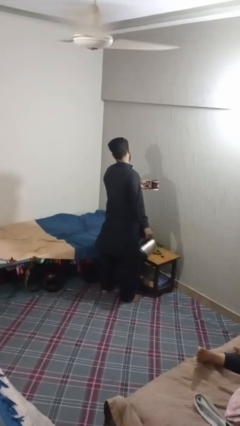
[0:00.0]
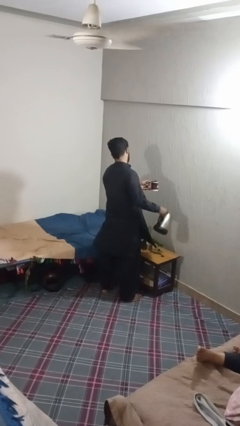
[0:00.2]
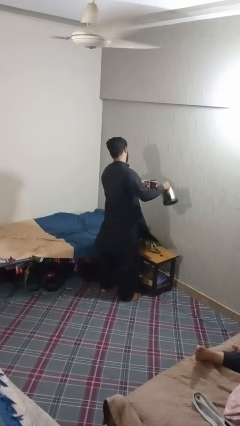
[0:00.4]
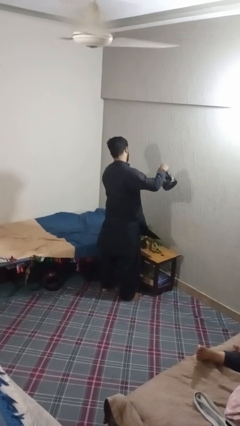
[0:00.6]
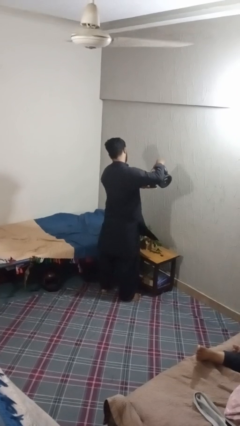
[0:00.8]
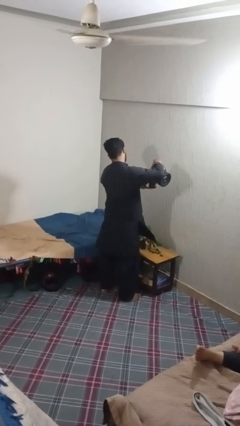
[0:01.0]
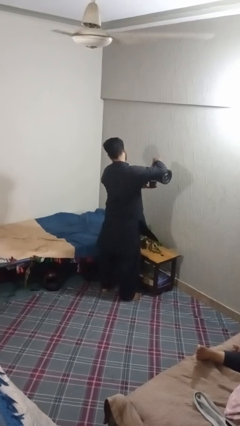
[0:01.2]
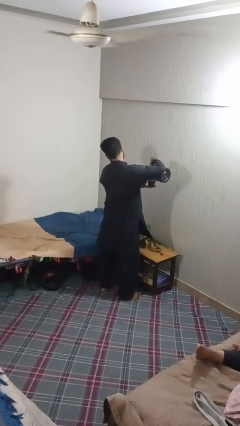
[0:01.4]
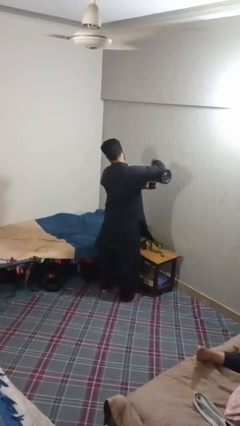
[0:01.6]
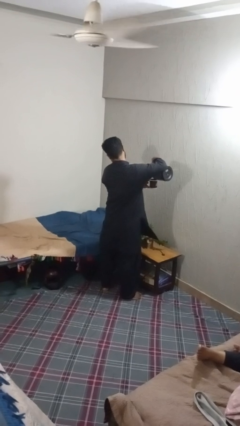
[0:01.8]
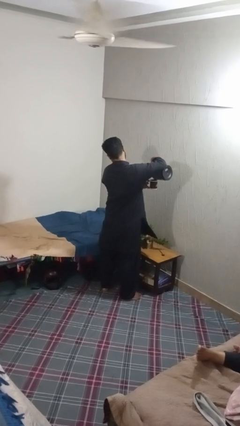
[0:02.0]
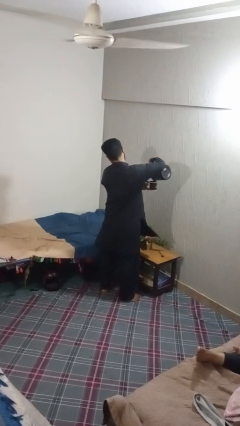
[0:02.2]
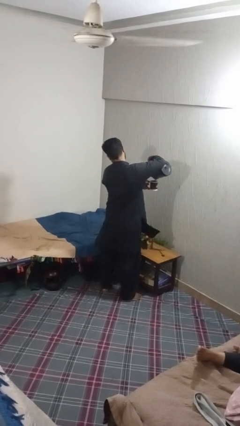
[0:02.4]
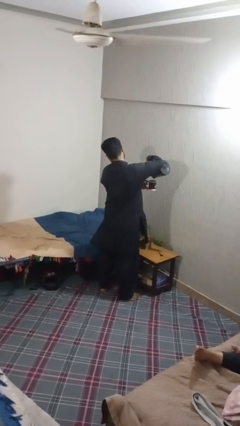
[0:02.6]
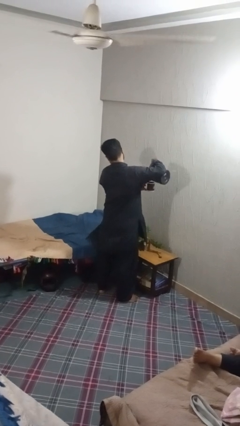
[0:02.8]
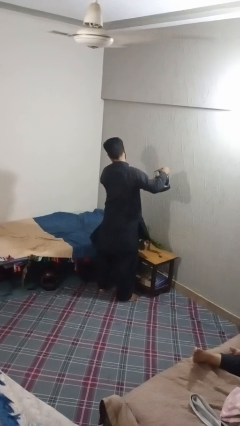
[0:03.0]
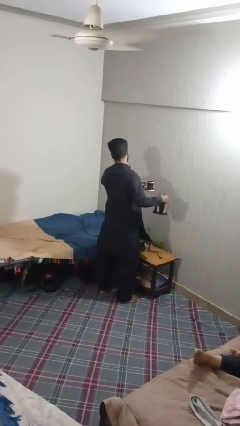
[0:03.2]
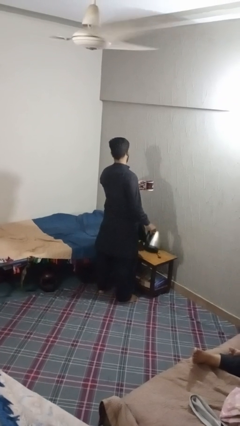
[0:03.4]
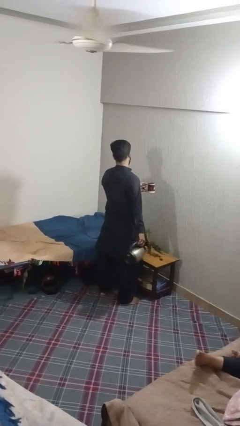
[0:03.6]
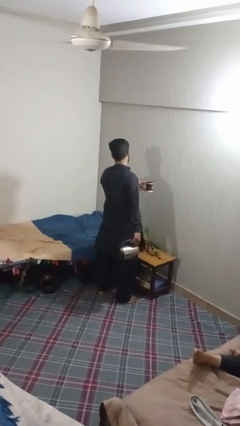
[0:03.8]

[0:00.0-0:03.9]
person pours coffee into mug

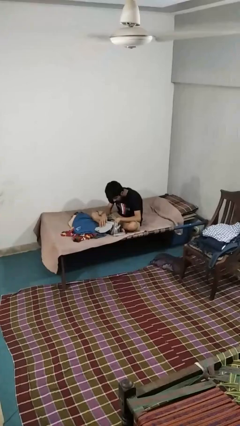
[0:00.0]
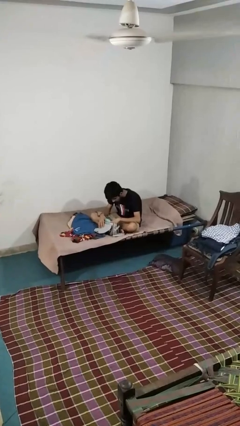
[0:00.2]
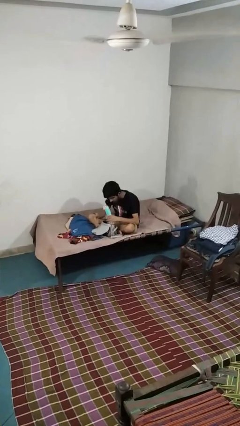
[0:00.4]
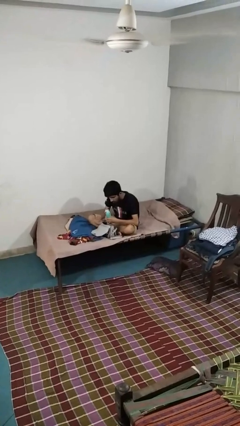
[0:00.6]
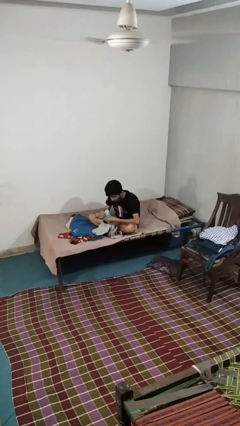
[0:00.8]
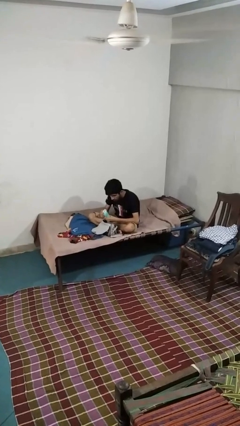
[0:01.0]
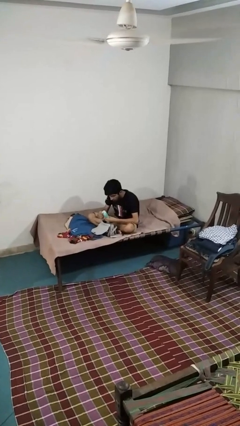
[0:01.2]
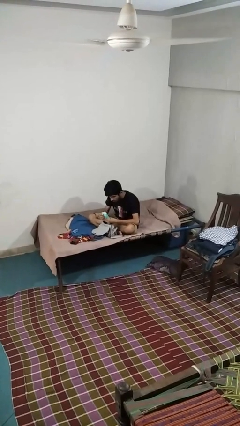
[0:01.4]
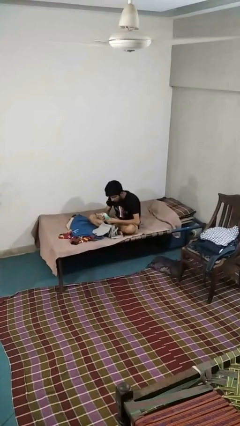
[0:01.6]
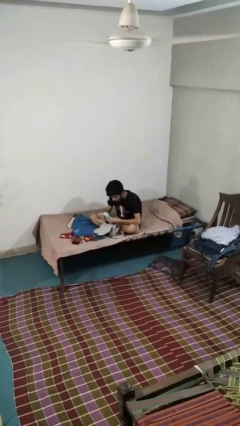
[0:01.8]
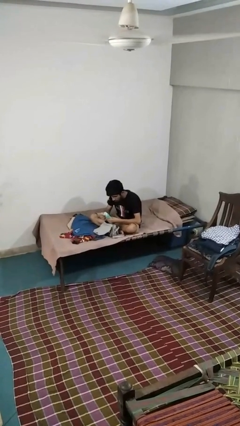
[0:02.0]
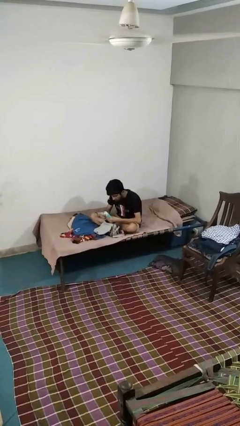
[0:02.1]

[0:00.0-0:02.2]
person takes object from purse

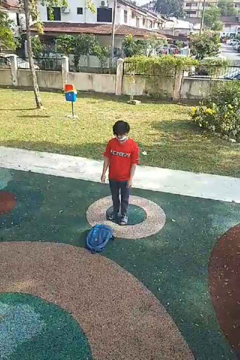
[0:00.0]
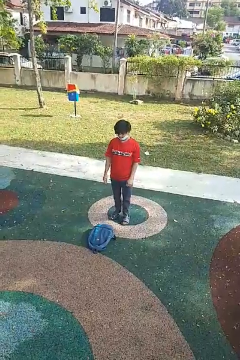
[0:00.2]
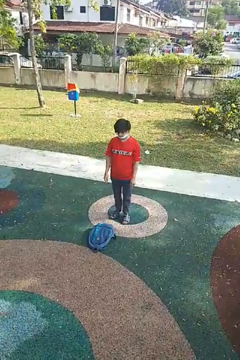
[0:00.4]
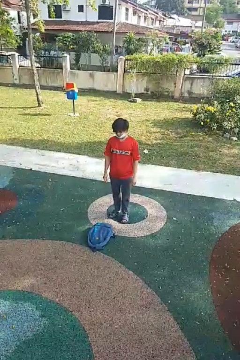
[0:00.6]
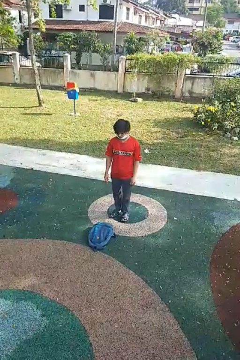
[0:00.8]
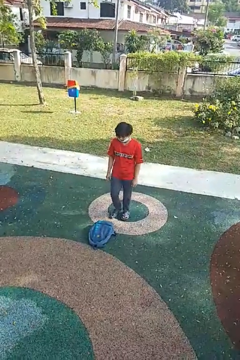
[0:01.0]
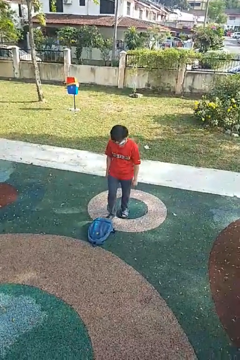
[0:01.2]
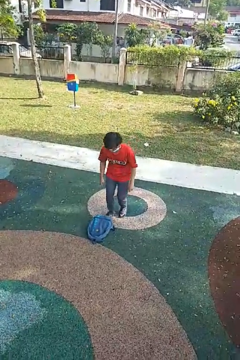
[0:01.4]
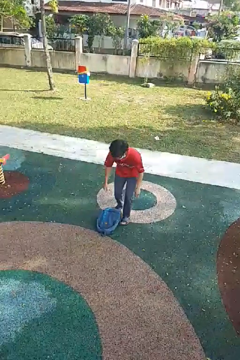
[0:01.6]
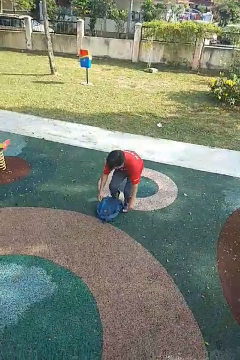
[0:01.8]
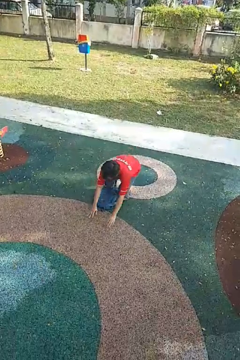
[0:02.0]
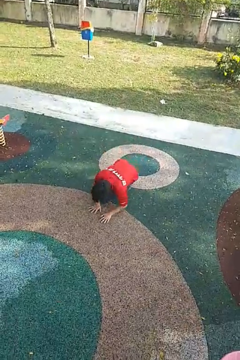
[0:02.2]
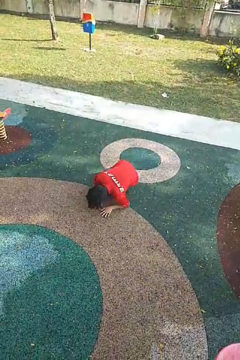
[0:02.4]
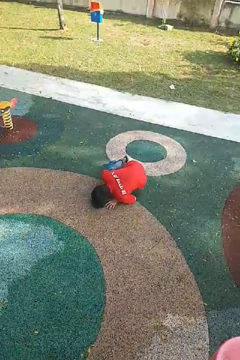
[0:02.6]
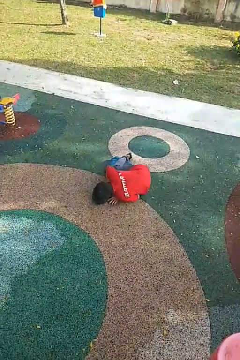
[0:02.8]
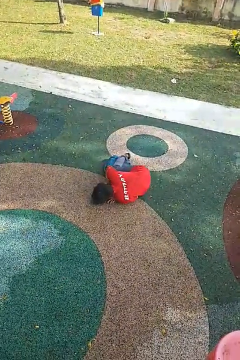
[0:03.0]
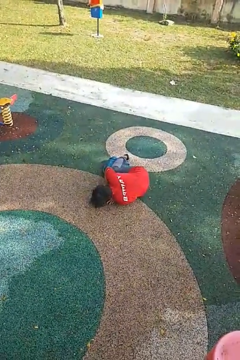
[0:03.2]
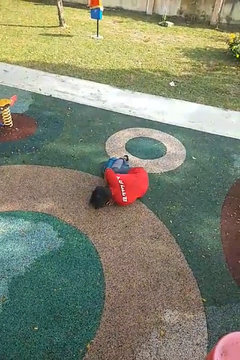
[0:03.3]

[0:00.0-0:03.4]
person trips on object on floor

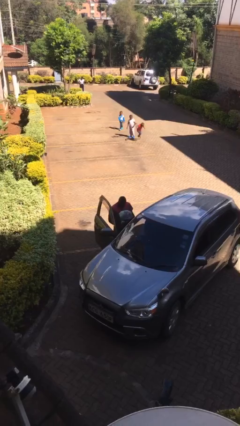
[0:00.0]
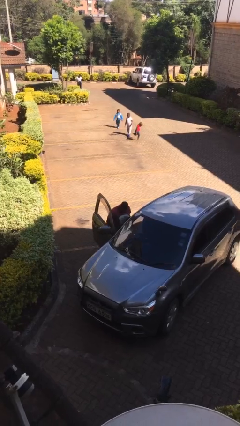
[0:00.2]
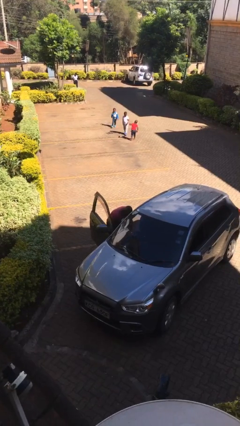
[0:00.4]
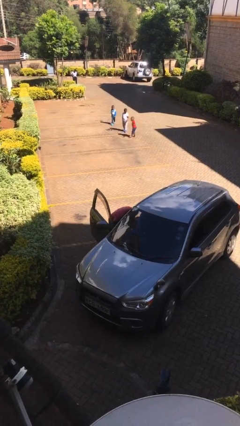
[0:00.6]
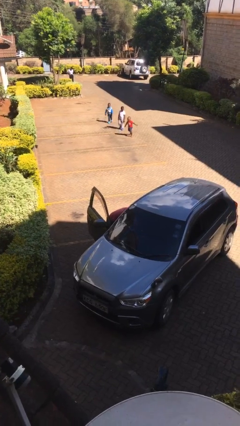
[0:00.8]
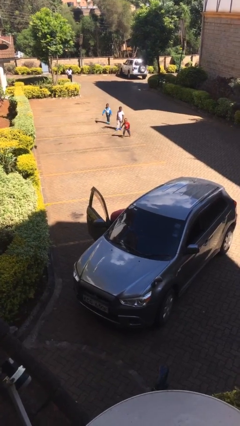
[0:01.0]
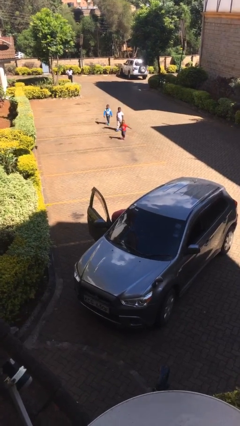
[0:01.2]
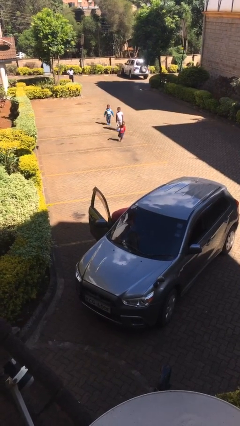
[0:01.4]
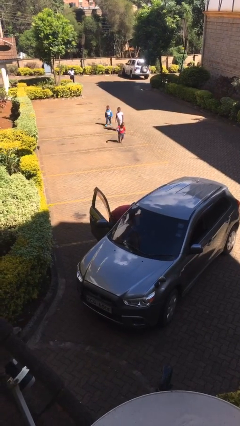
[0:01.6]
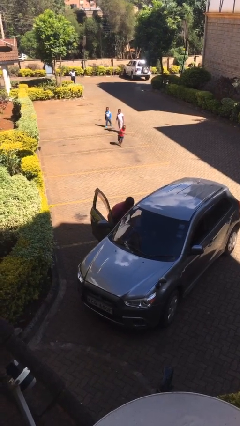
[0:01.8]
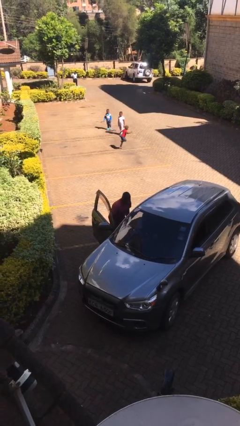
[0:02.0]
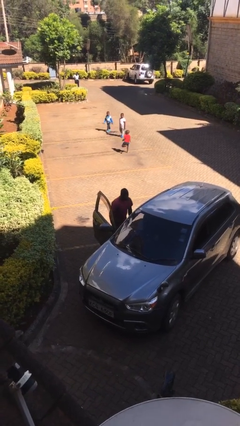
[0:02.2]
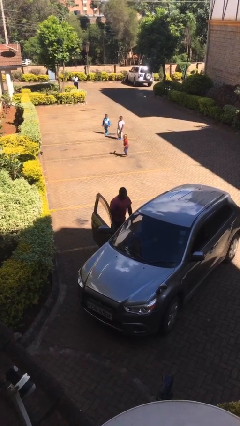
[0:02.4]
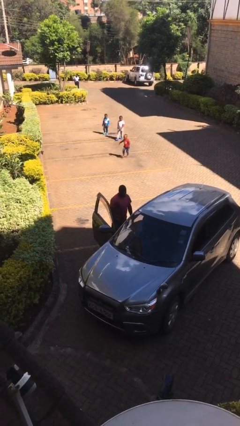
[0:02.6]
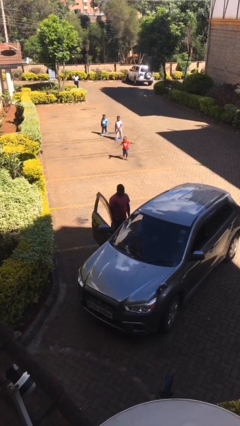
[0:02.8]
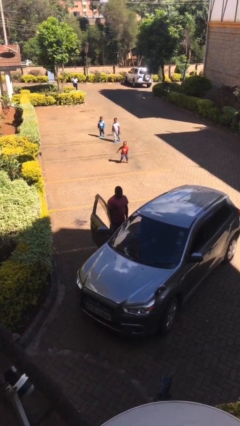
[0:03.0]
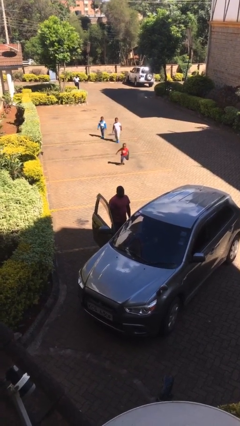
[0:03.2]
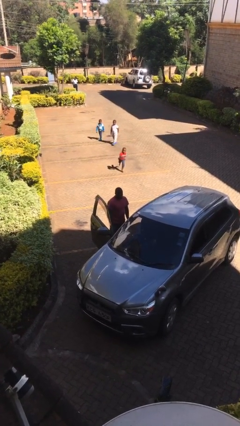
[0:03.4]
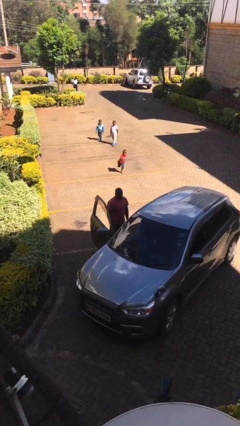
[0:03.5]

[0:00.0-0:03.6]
person loads car

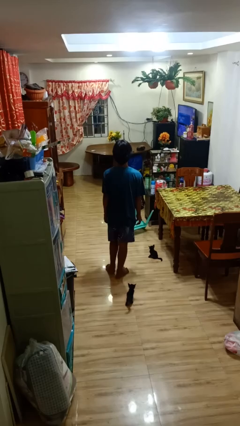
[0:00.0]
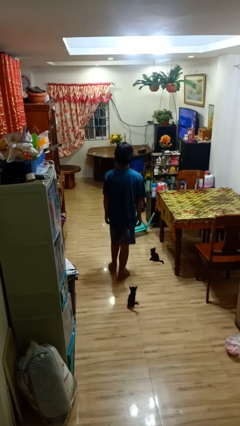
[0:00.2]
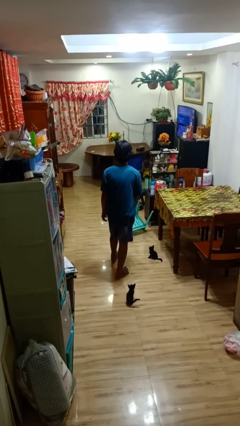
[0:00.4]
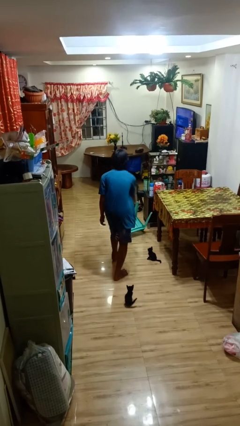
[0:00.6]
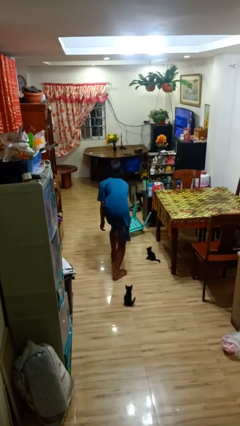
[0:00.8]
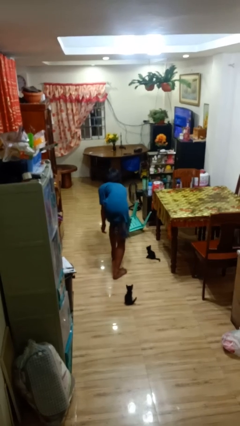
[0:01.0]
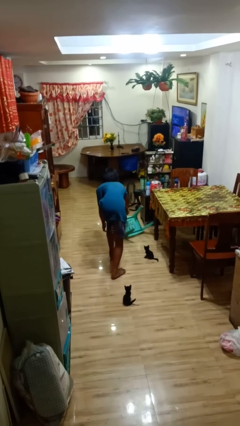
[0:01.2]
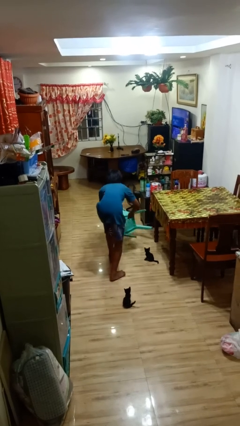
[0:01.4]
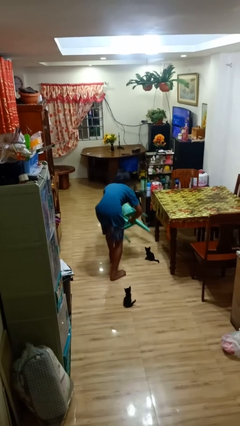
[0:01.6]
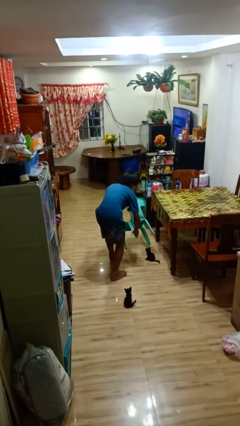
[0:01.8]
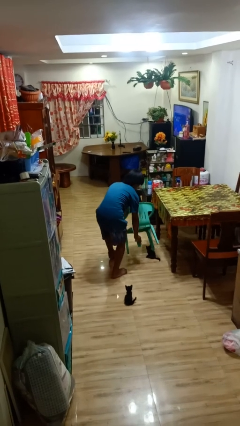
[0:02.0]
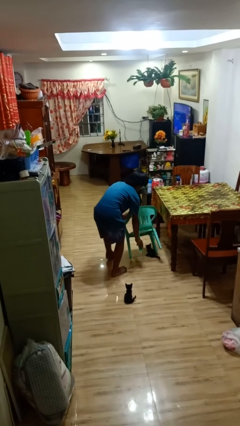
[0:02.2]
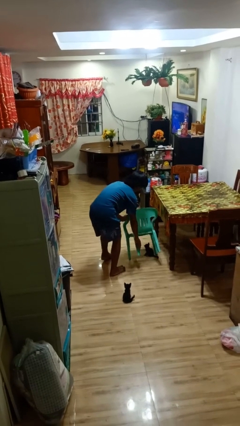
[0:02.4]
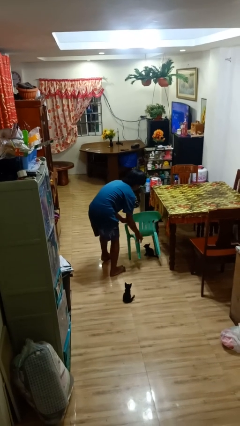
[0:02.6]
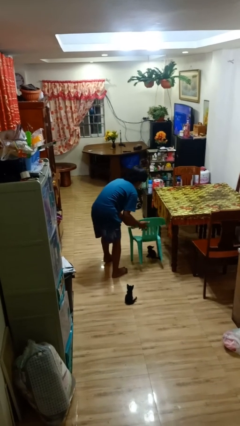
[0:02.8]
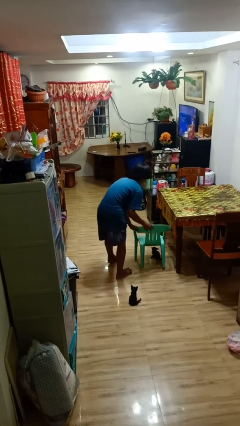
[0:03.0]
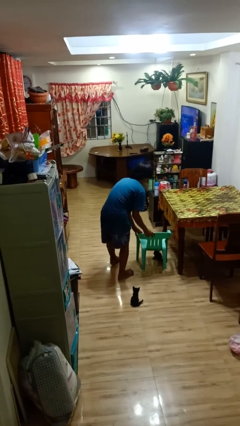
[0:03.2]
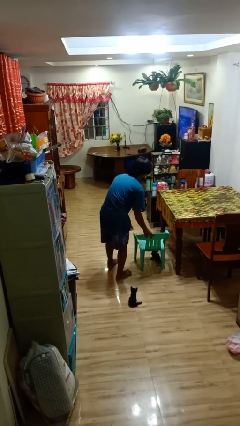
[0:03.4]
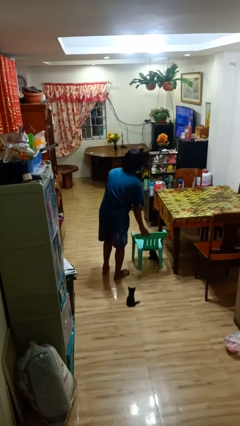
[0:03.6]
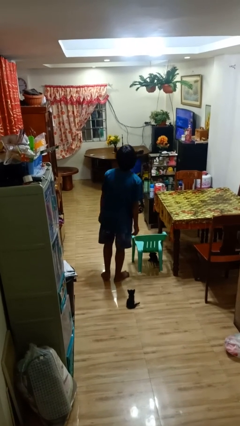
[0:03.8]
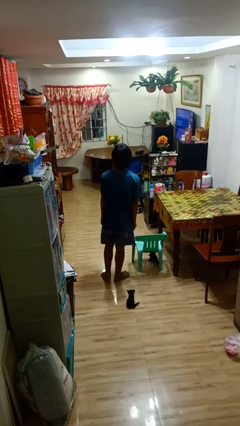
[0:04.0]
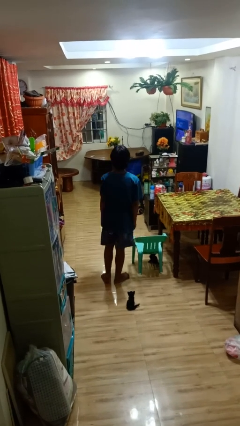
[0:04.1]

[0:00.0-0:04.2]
person sets upright furniture

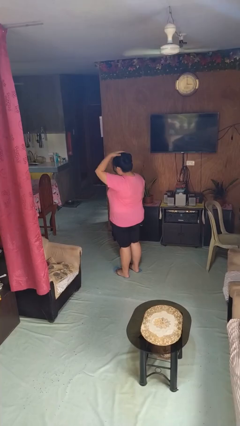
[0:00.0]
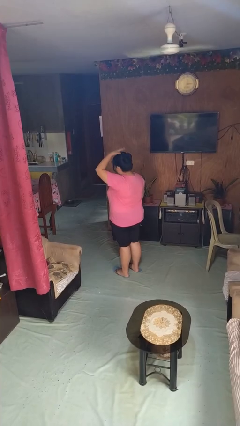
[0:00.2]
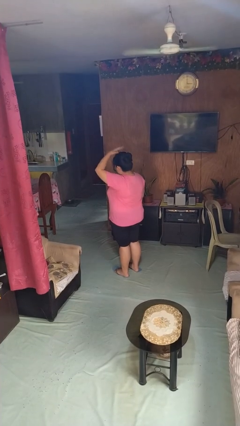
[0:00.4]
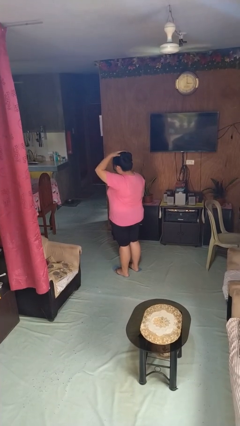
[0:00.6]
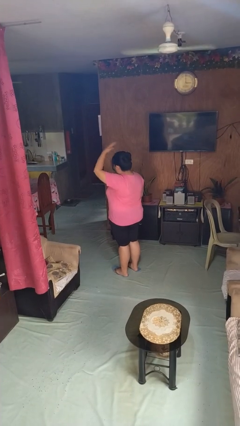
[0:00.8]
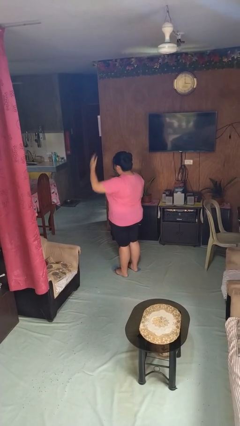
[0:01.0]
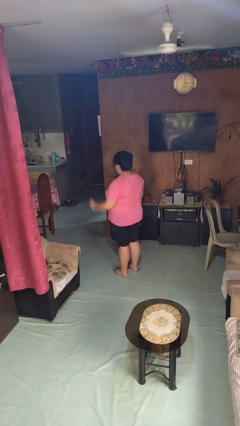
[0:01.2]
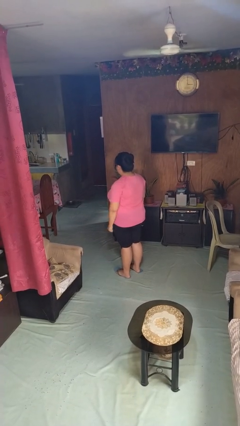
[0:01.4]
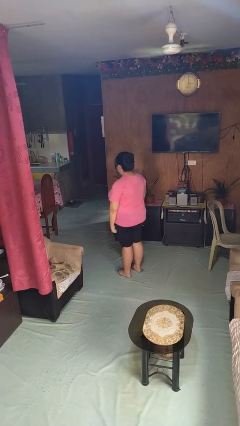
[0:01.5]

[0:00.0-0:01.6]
person pats head
